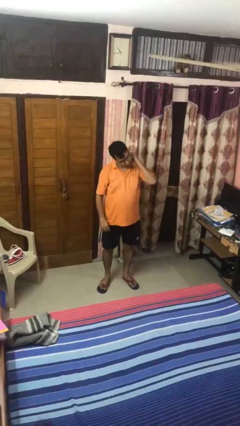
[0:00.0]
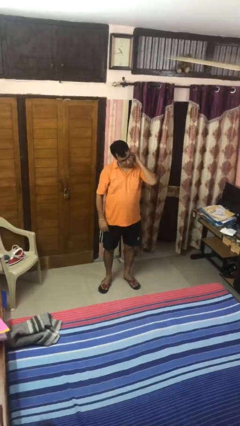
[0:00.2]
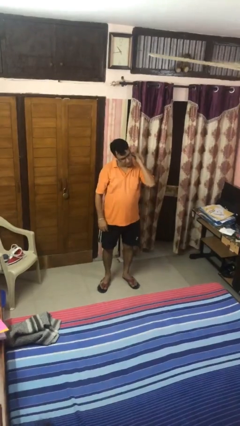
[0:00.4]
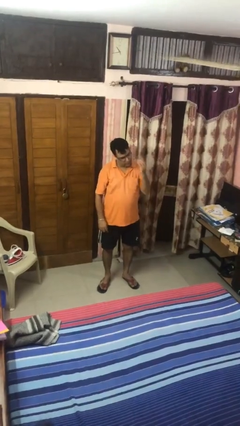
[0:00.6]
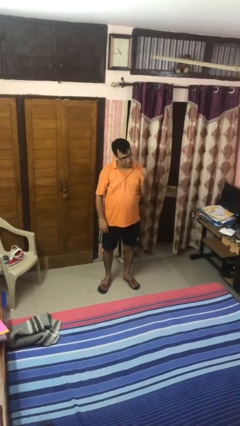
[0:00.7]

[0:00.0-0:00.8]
person swats bug

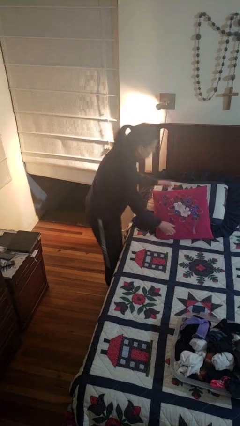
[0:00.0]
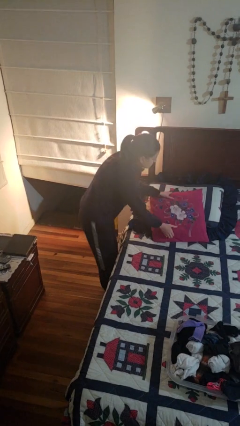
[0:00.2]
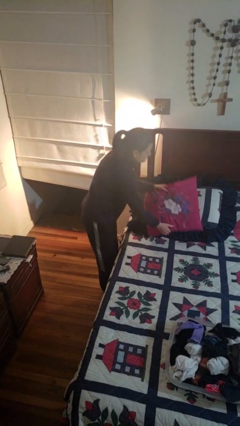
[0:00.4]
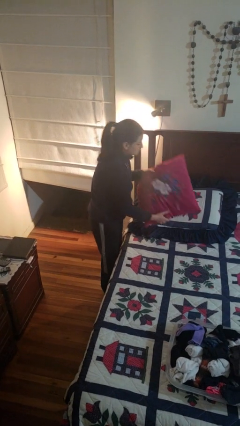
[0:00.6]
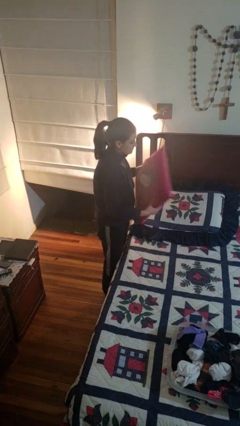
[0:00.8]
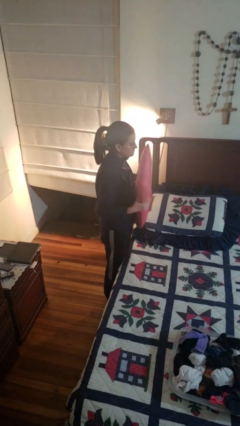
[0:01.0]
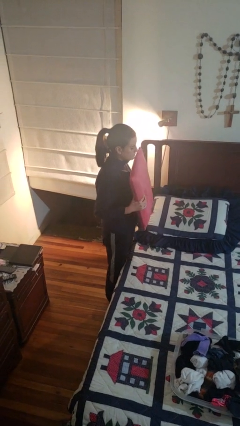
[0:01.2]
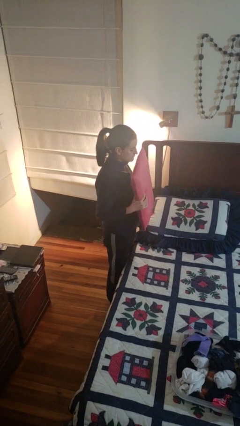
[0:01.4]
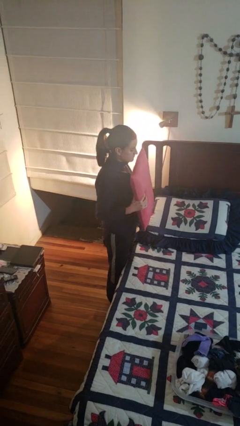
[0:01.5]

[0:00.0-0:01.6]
person picks up object from bed

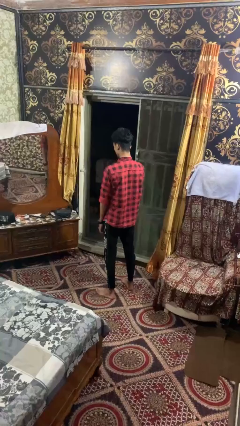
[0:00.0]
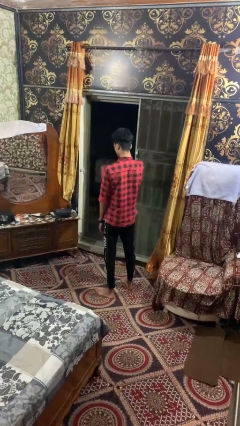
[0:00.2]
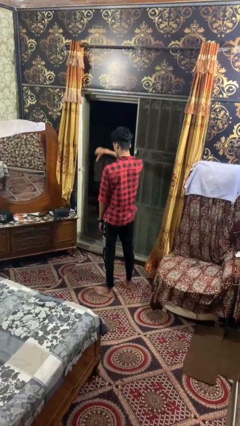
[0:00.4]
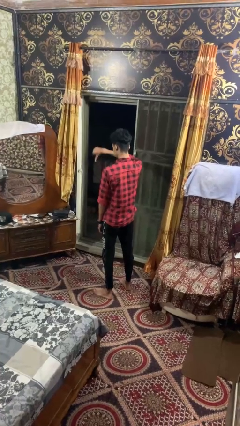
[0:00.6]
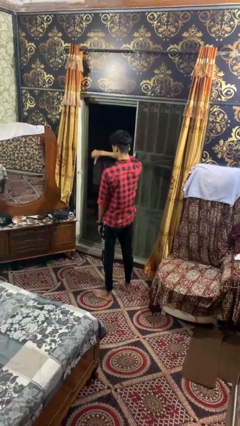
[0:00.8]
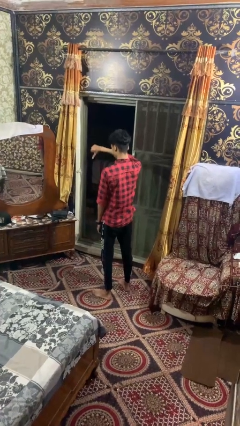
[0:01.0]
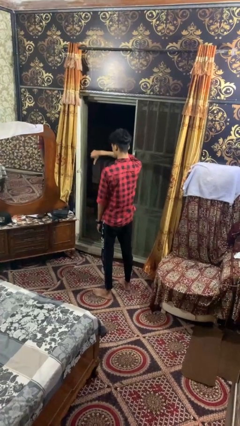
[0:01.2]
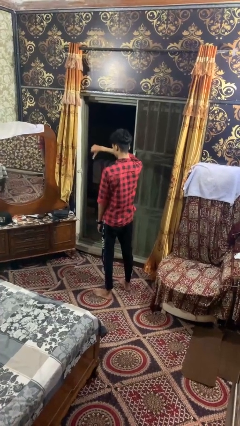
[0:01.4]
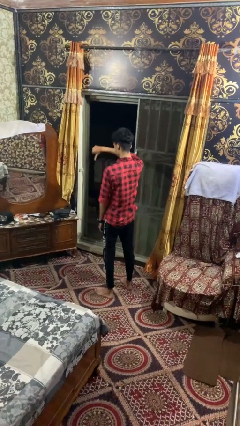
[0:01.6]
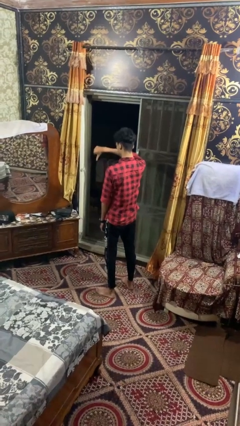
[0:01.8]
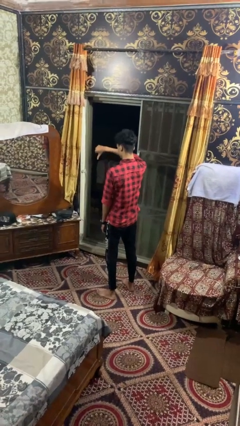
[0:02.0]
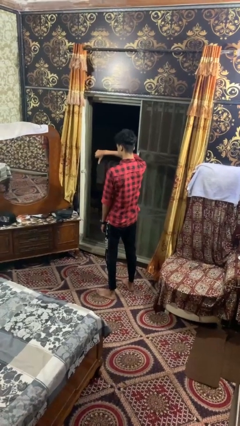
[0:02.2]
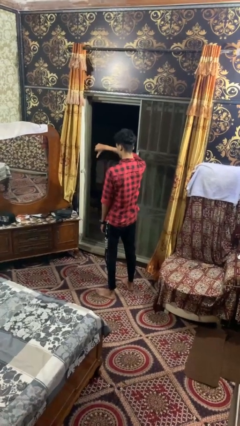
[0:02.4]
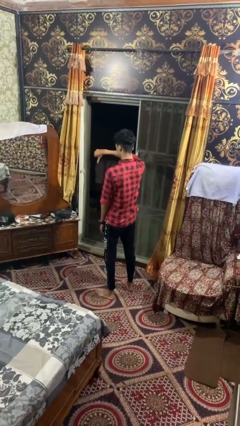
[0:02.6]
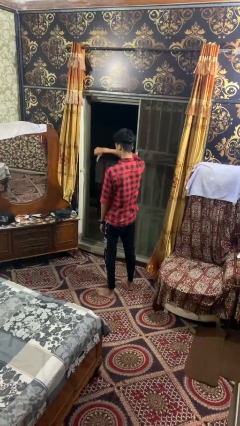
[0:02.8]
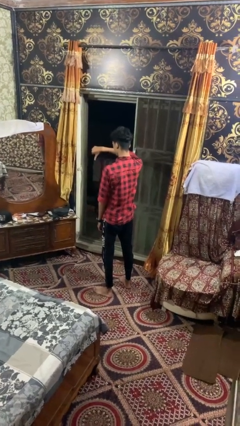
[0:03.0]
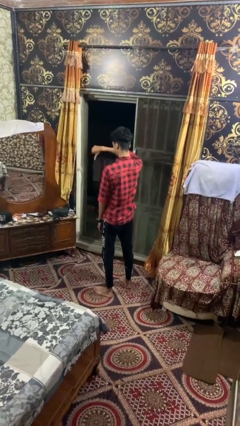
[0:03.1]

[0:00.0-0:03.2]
person gestures thumbs down

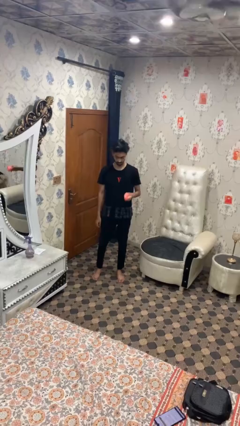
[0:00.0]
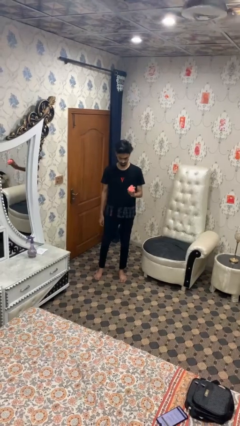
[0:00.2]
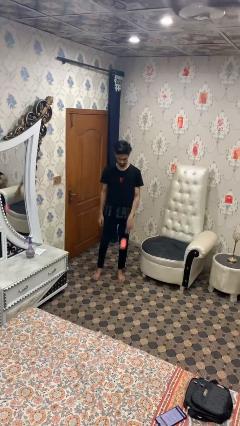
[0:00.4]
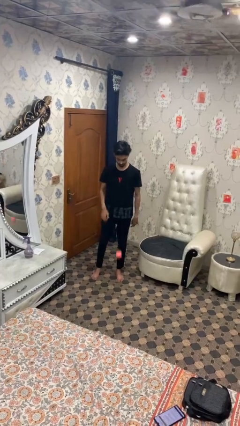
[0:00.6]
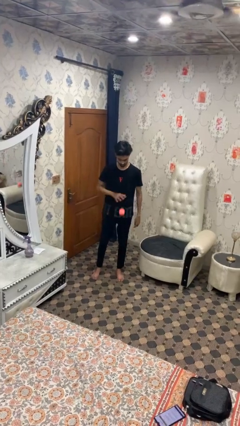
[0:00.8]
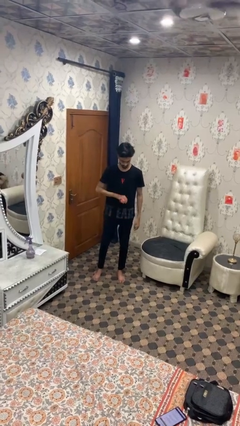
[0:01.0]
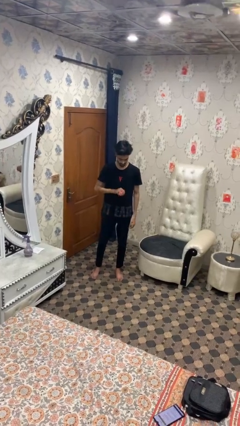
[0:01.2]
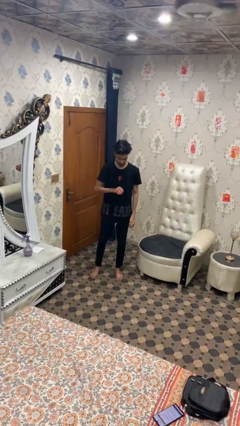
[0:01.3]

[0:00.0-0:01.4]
person bounces ball on floor

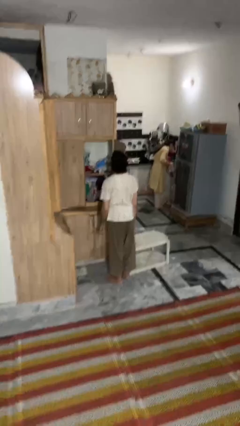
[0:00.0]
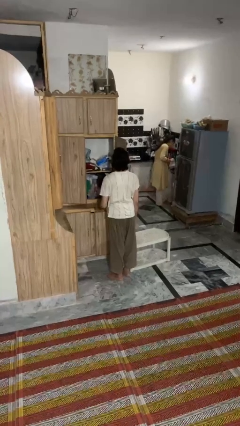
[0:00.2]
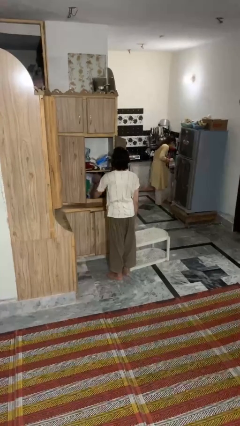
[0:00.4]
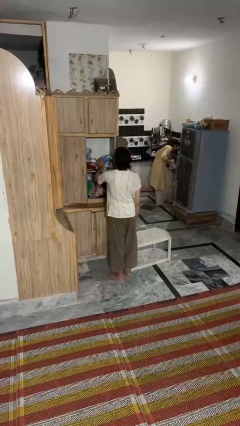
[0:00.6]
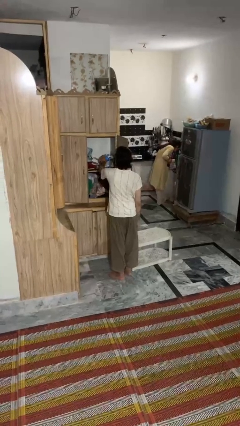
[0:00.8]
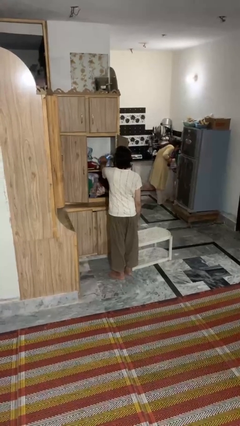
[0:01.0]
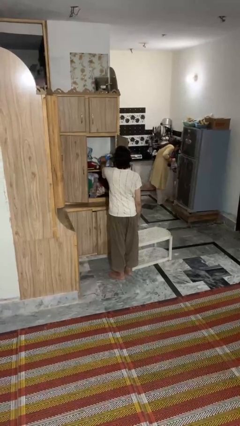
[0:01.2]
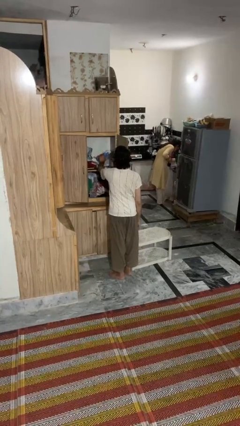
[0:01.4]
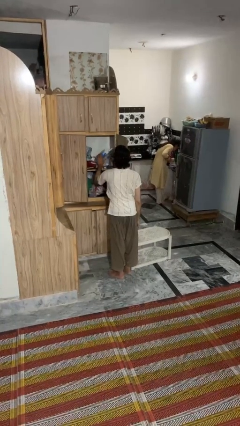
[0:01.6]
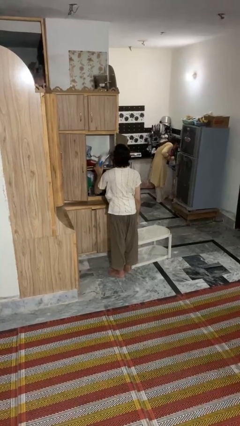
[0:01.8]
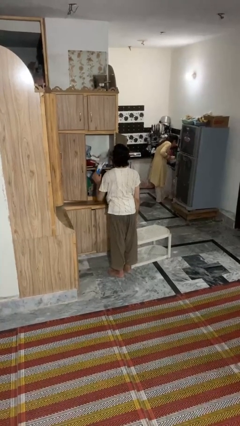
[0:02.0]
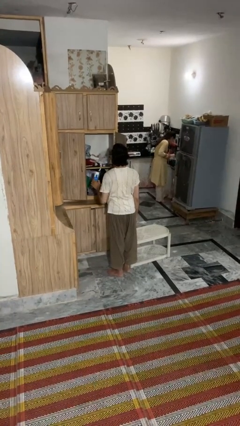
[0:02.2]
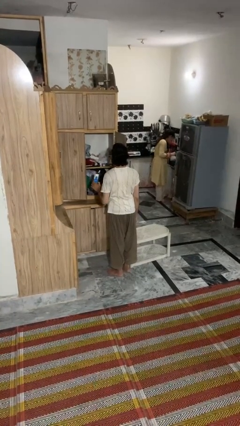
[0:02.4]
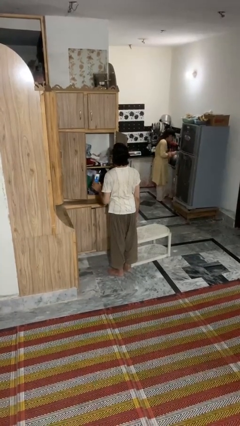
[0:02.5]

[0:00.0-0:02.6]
person picks up object from cabinet

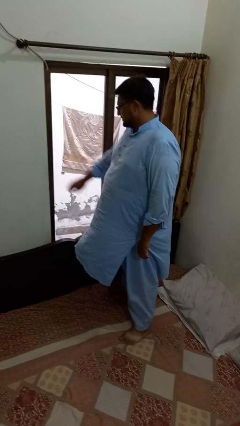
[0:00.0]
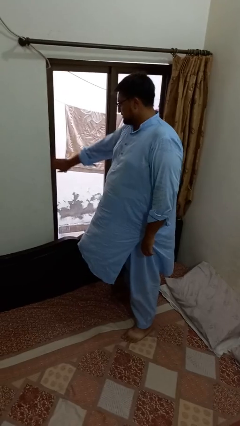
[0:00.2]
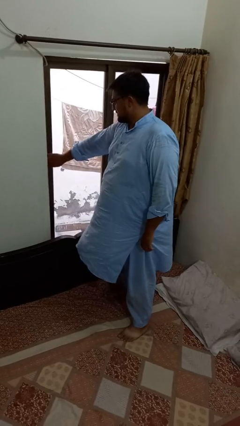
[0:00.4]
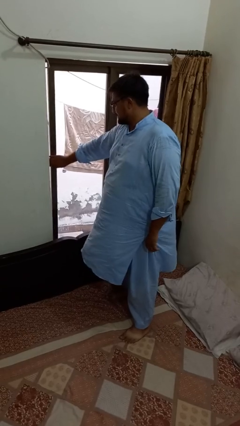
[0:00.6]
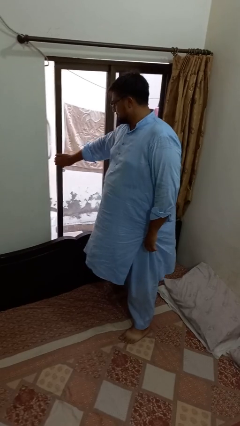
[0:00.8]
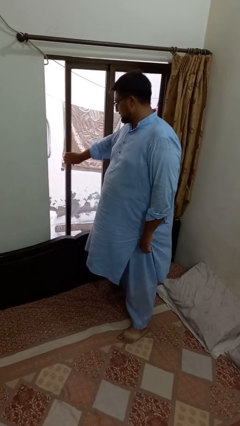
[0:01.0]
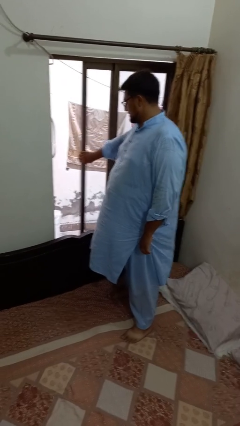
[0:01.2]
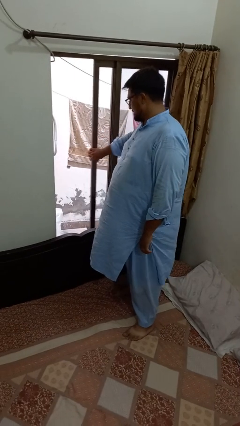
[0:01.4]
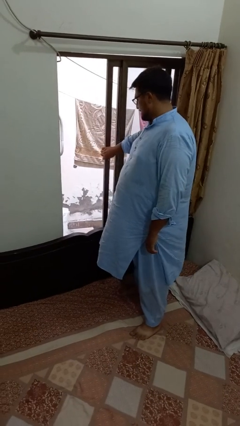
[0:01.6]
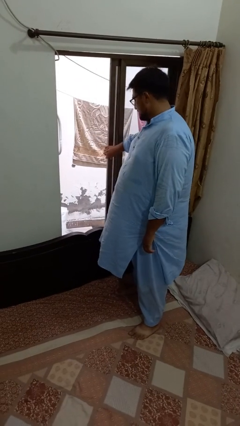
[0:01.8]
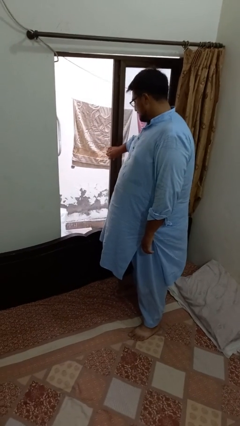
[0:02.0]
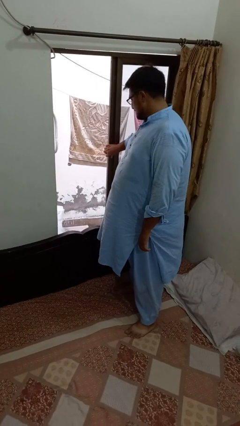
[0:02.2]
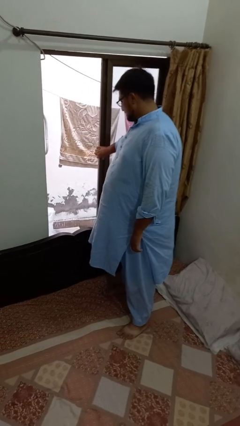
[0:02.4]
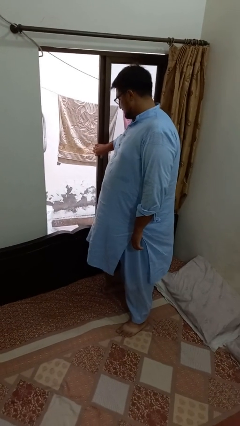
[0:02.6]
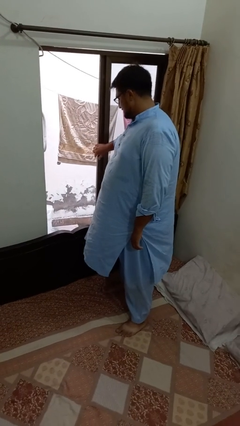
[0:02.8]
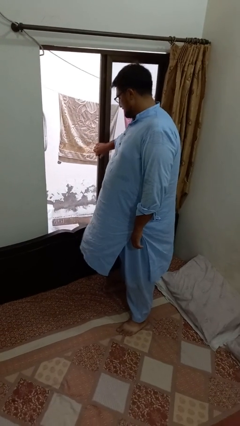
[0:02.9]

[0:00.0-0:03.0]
person opens home window

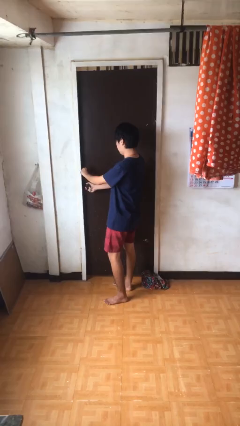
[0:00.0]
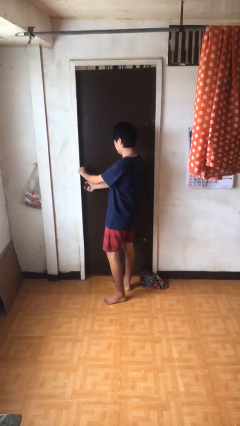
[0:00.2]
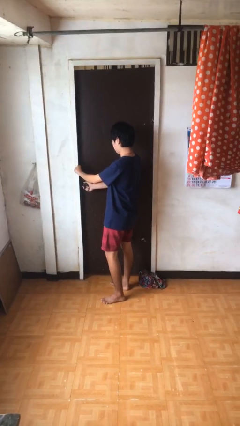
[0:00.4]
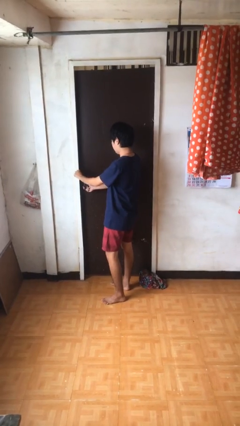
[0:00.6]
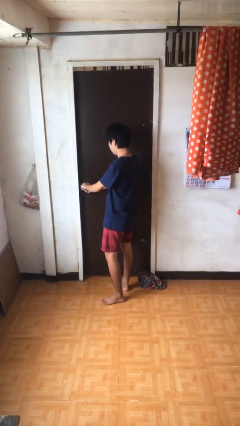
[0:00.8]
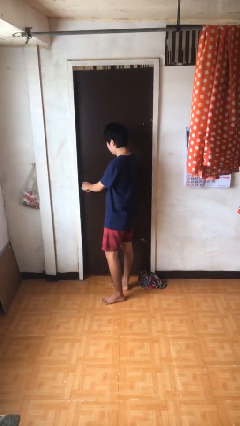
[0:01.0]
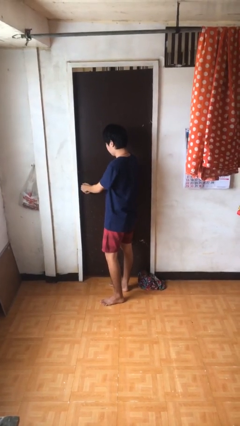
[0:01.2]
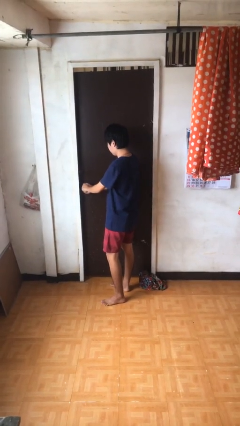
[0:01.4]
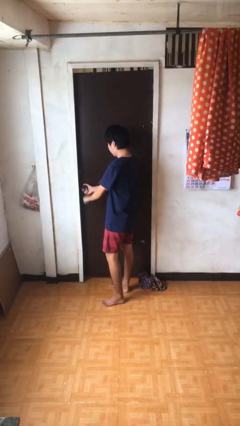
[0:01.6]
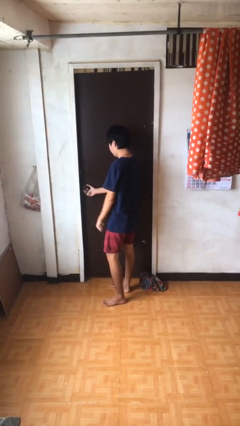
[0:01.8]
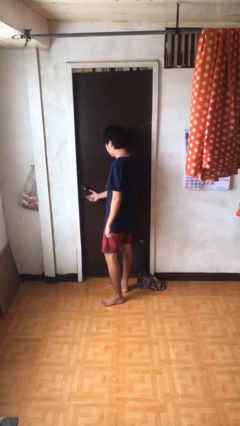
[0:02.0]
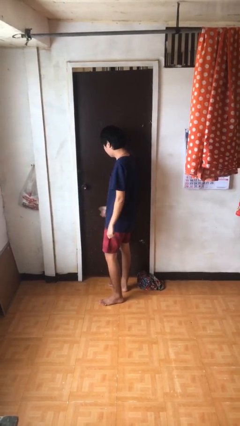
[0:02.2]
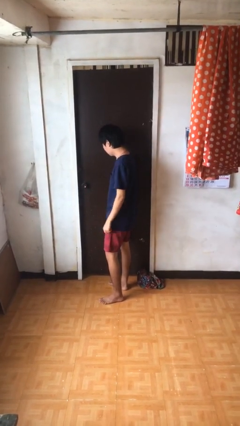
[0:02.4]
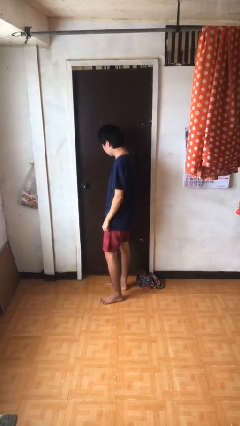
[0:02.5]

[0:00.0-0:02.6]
person locks door with keys

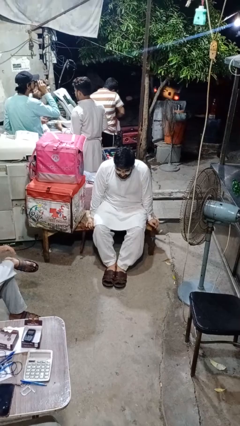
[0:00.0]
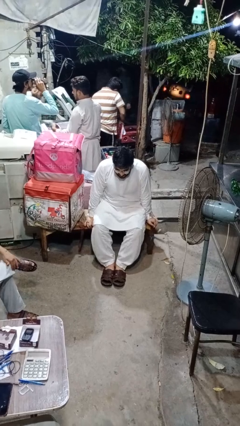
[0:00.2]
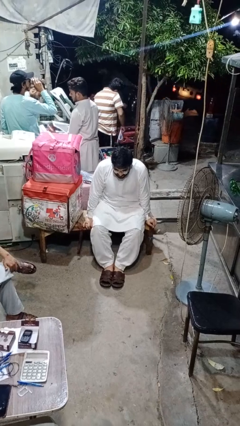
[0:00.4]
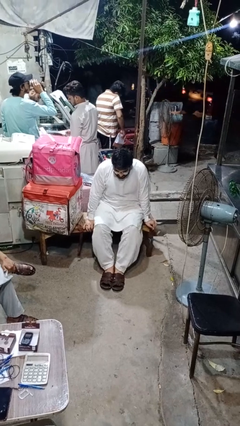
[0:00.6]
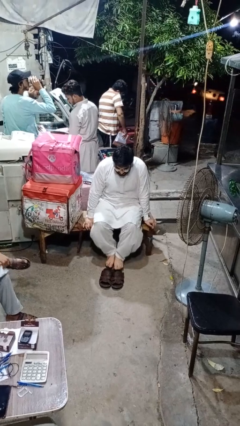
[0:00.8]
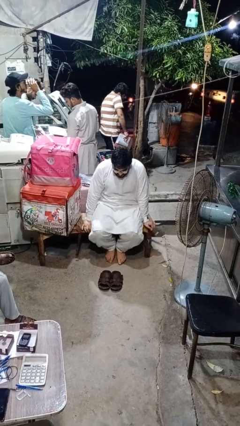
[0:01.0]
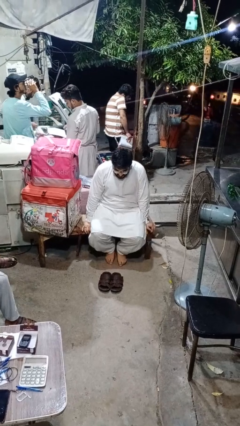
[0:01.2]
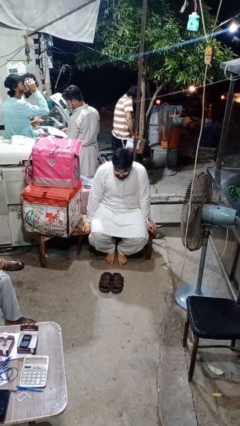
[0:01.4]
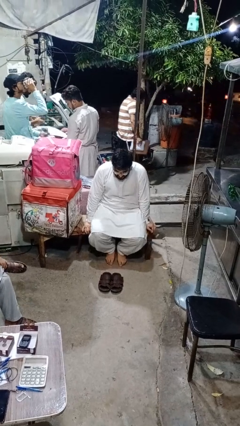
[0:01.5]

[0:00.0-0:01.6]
person takes off shoes

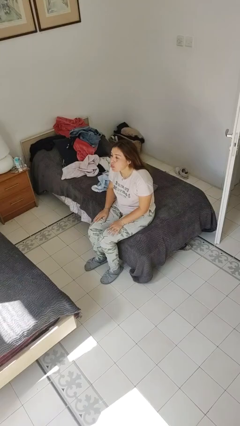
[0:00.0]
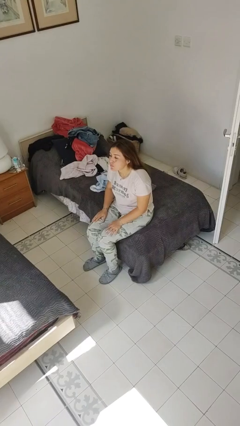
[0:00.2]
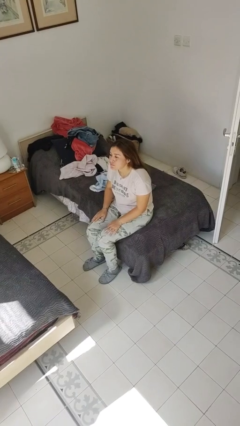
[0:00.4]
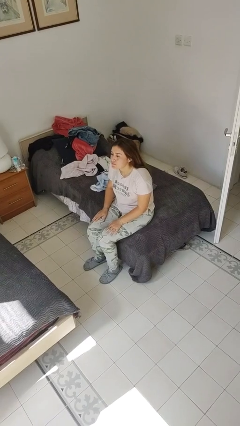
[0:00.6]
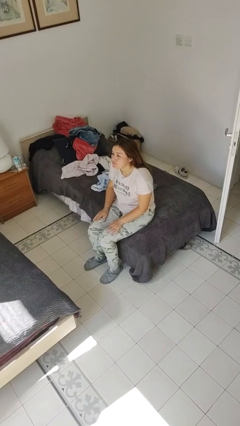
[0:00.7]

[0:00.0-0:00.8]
person sticks out tongue
